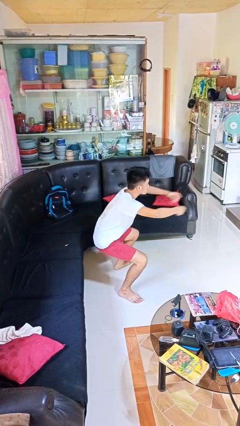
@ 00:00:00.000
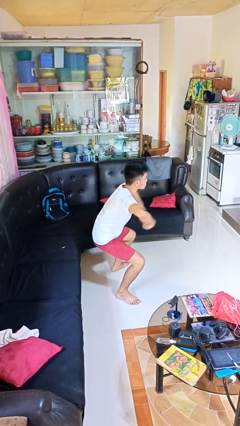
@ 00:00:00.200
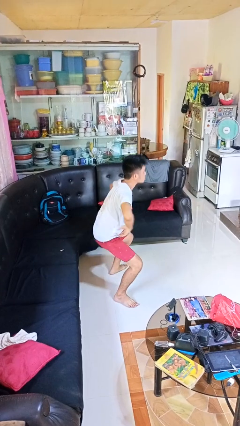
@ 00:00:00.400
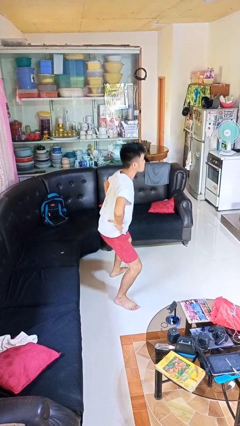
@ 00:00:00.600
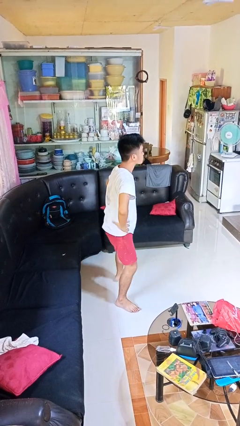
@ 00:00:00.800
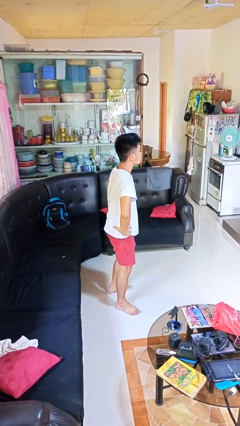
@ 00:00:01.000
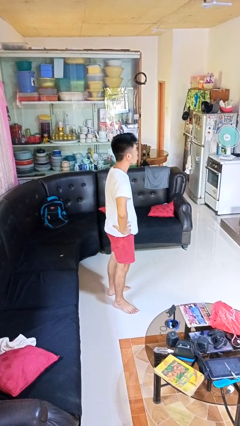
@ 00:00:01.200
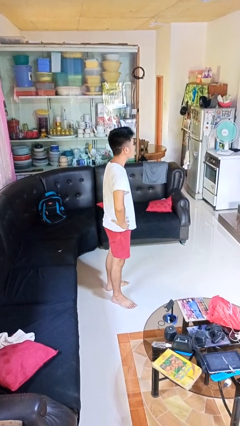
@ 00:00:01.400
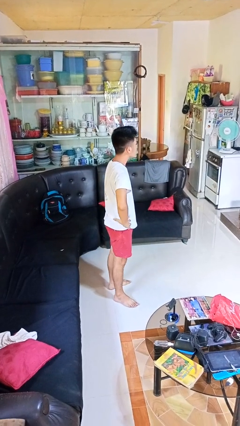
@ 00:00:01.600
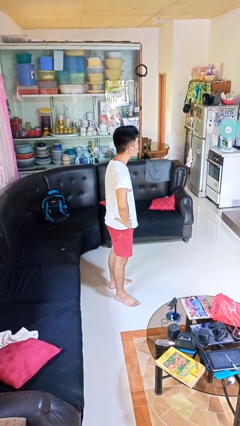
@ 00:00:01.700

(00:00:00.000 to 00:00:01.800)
person stands up

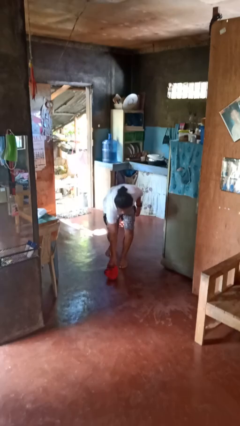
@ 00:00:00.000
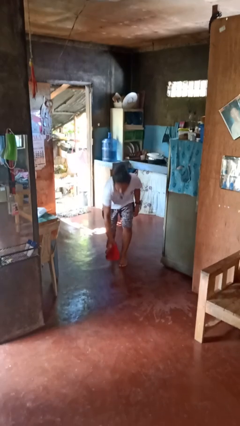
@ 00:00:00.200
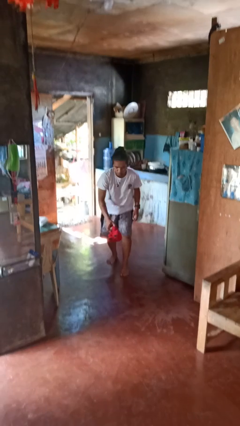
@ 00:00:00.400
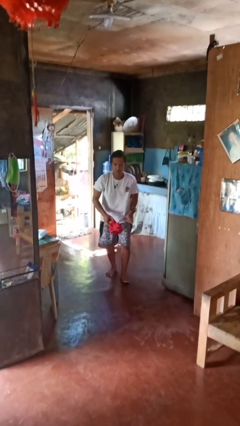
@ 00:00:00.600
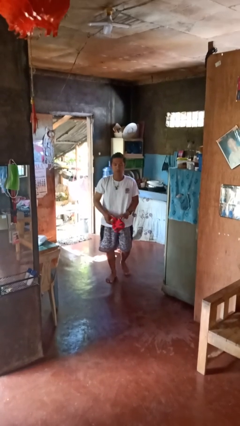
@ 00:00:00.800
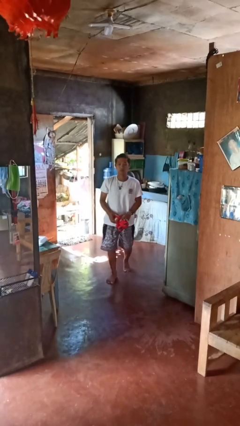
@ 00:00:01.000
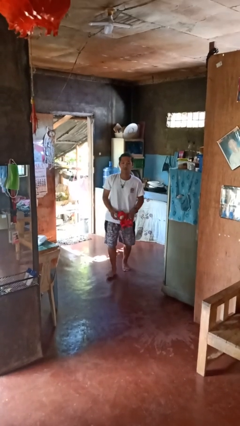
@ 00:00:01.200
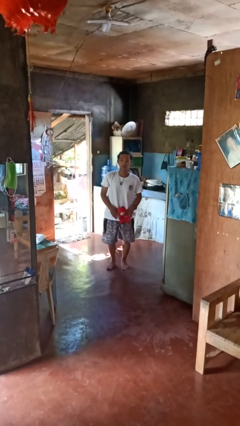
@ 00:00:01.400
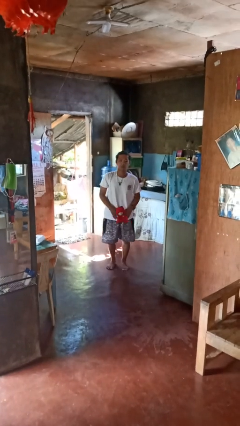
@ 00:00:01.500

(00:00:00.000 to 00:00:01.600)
person picks up object from floor

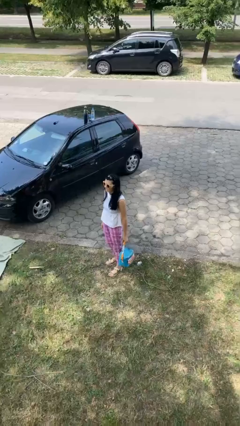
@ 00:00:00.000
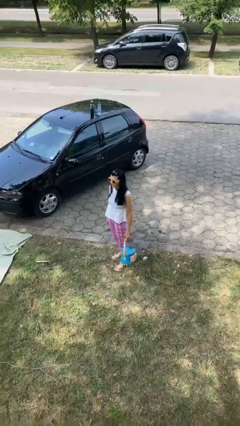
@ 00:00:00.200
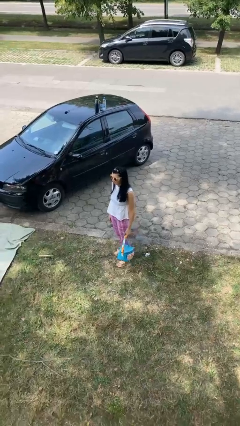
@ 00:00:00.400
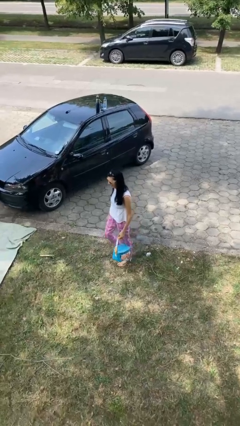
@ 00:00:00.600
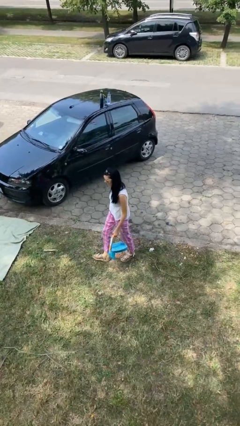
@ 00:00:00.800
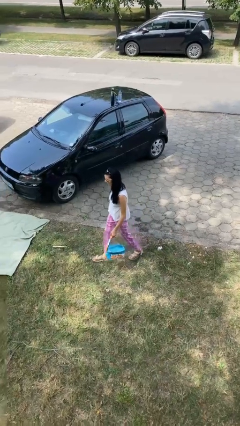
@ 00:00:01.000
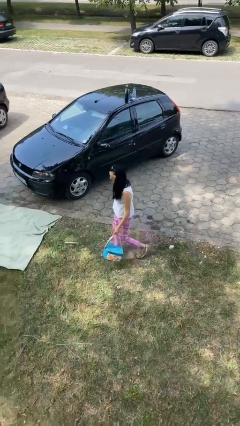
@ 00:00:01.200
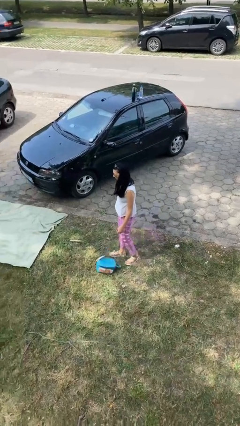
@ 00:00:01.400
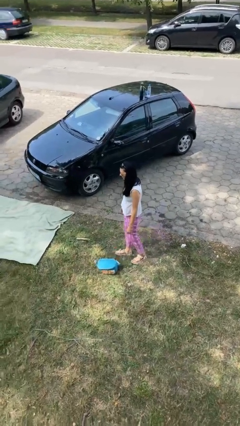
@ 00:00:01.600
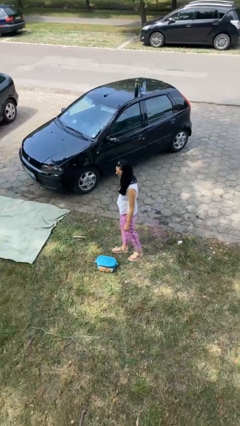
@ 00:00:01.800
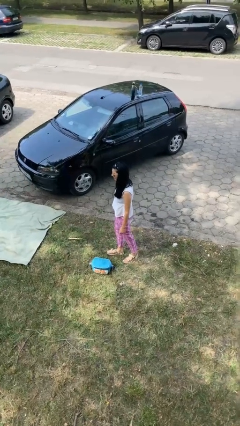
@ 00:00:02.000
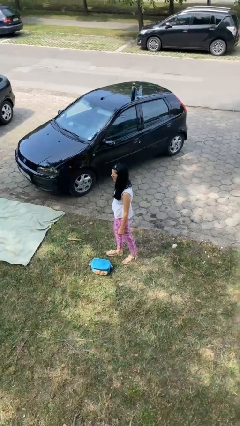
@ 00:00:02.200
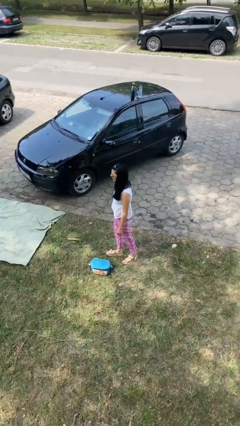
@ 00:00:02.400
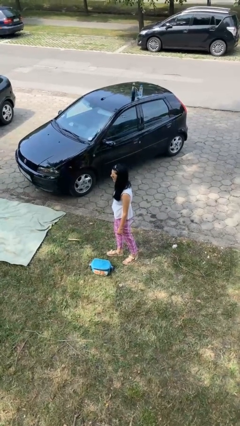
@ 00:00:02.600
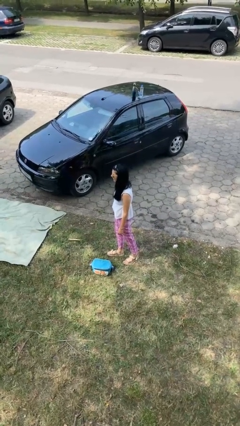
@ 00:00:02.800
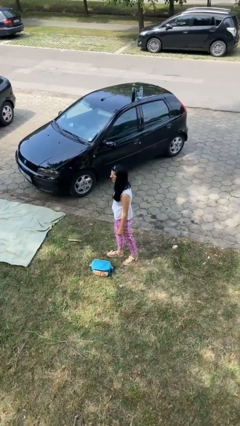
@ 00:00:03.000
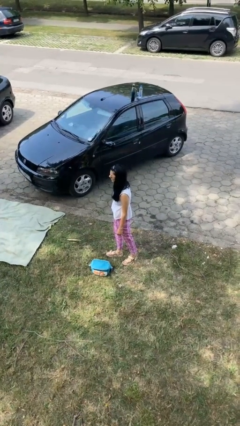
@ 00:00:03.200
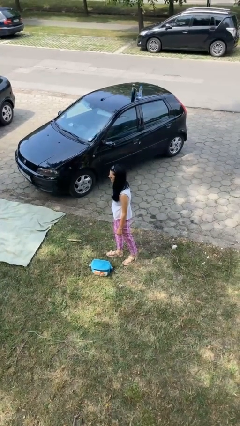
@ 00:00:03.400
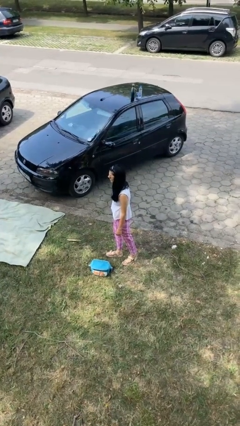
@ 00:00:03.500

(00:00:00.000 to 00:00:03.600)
person drops object

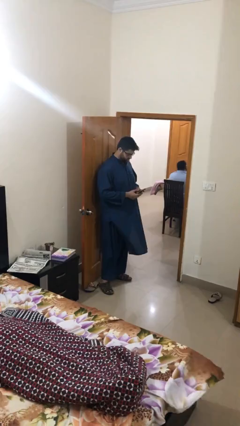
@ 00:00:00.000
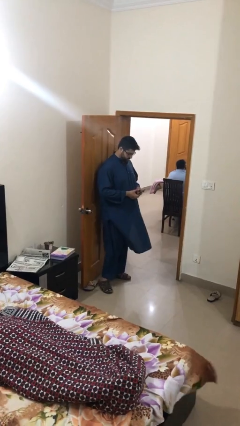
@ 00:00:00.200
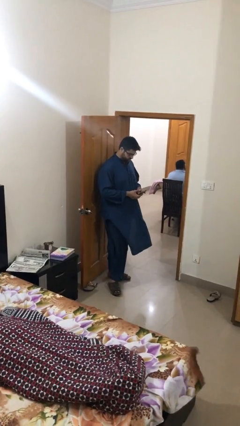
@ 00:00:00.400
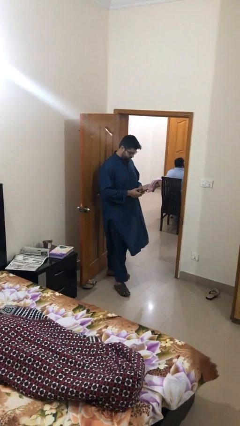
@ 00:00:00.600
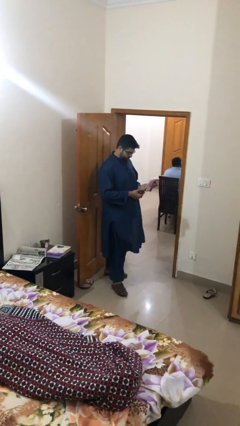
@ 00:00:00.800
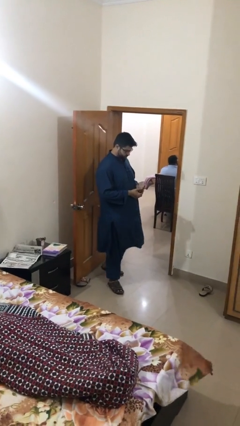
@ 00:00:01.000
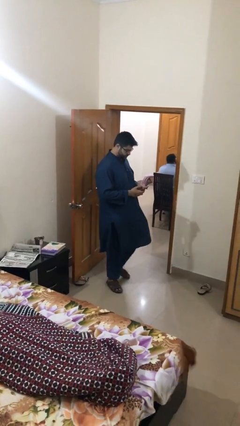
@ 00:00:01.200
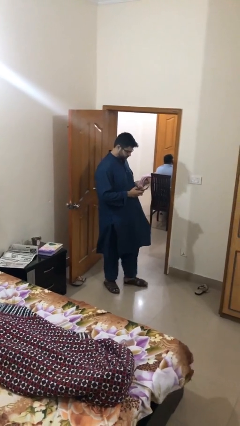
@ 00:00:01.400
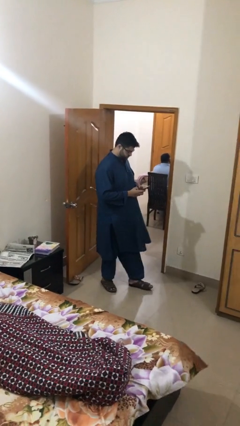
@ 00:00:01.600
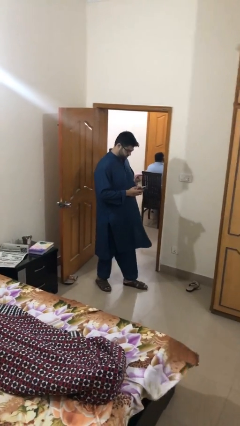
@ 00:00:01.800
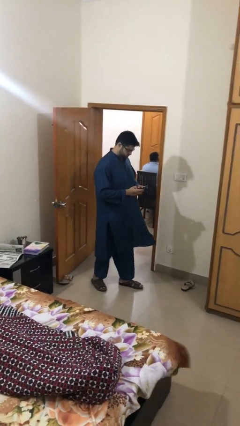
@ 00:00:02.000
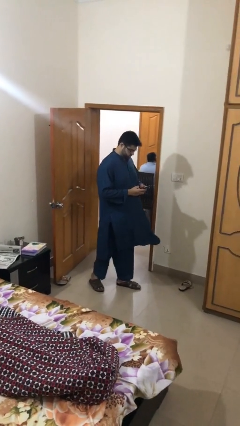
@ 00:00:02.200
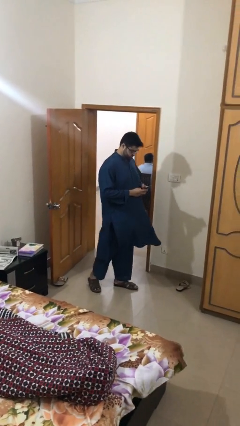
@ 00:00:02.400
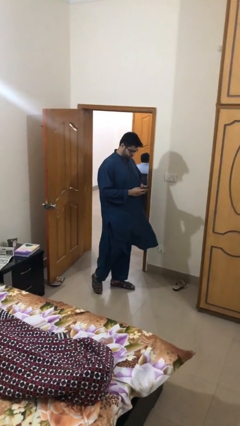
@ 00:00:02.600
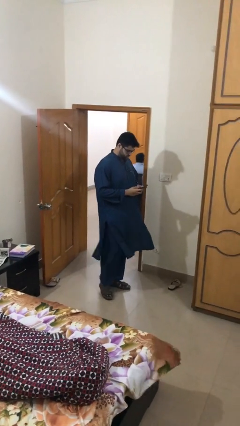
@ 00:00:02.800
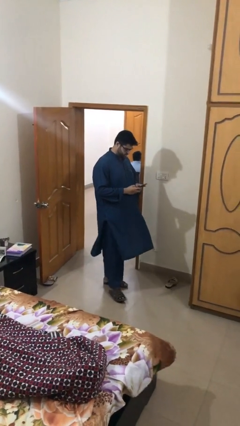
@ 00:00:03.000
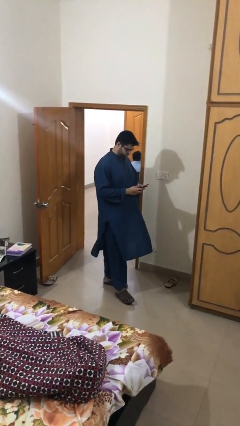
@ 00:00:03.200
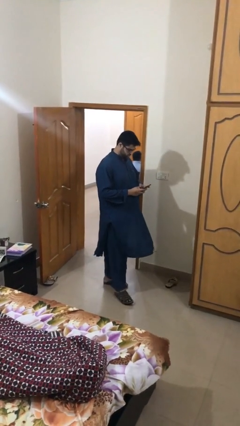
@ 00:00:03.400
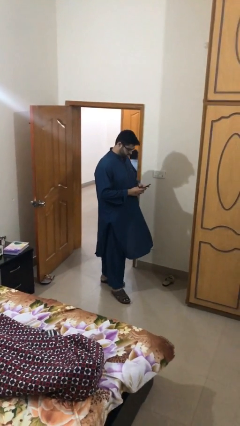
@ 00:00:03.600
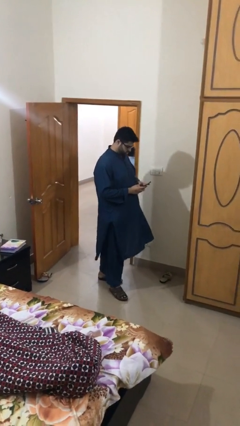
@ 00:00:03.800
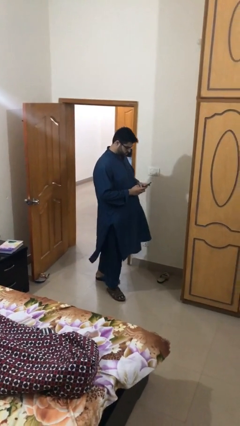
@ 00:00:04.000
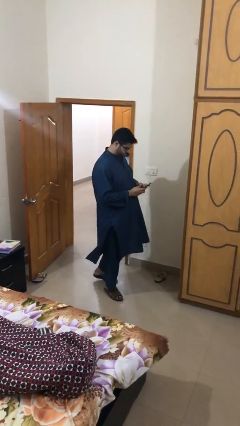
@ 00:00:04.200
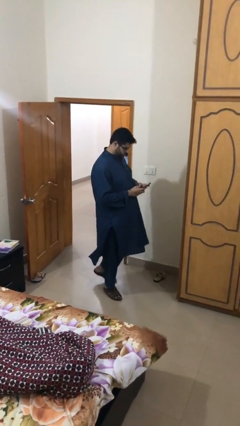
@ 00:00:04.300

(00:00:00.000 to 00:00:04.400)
person texts on phone

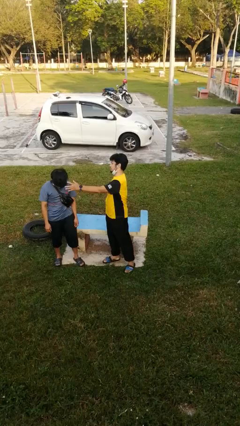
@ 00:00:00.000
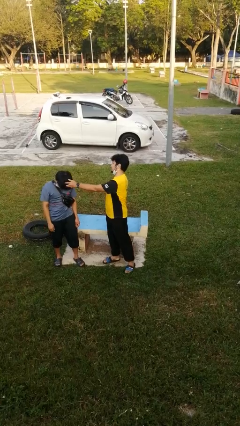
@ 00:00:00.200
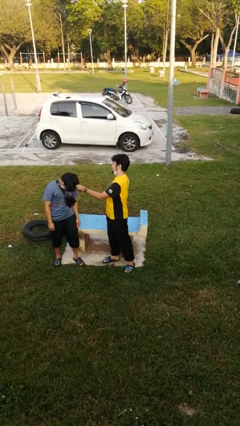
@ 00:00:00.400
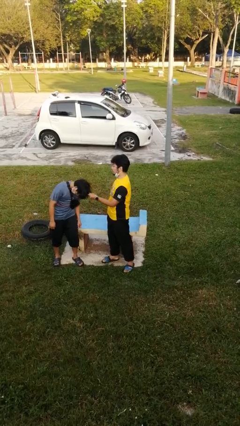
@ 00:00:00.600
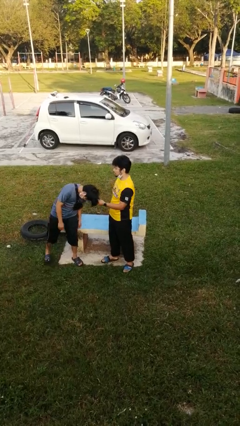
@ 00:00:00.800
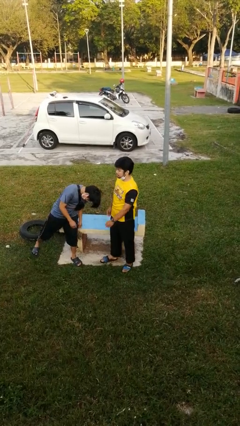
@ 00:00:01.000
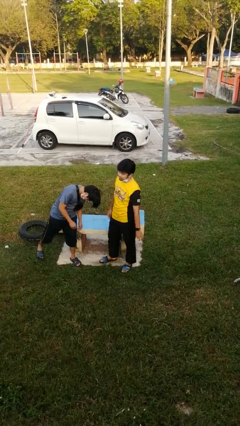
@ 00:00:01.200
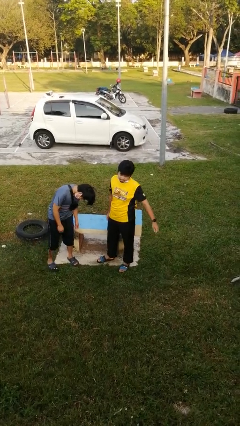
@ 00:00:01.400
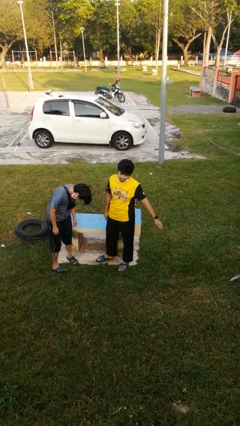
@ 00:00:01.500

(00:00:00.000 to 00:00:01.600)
person grabs person by hair

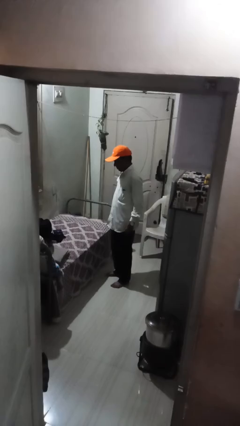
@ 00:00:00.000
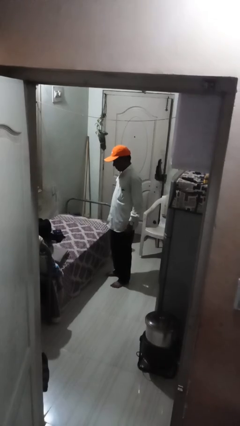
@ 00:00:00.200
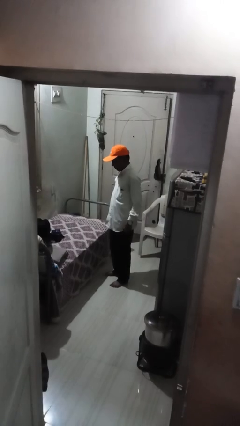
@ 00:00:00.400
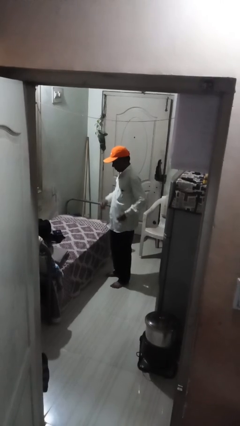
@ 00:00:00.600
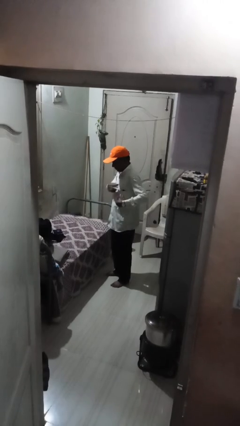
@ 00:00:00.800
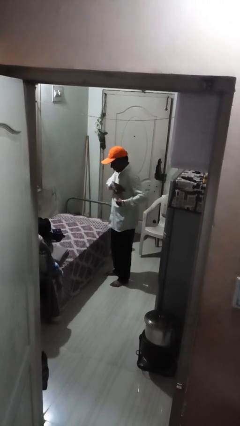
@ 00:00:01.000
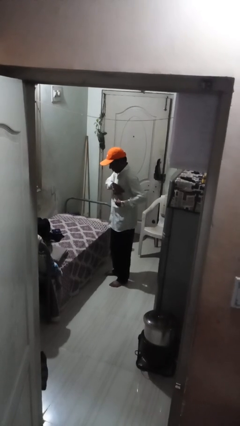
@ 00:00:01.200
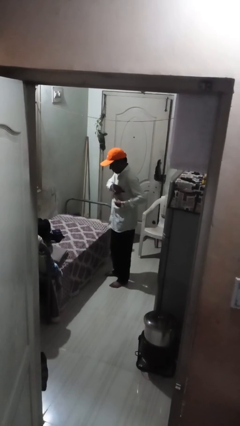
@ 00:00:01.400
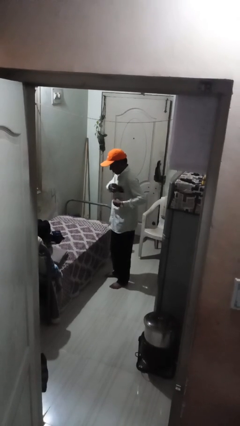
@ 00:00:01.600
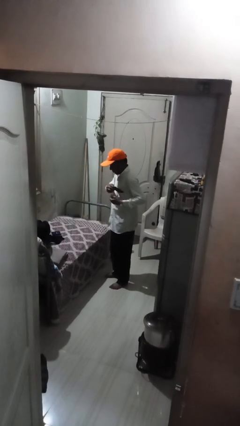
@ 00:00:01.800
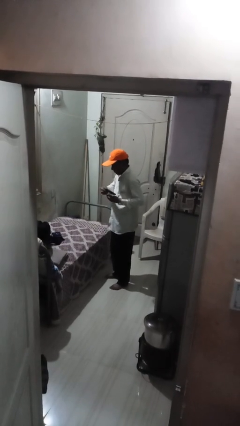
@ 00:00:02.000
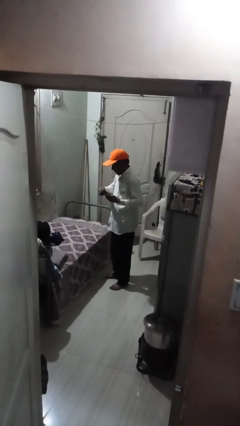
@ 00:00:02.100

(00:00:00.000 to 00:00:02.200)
person takes phone from pocket

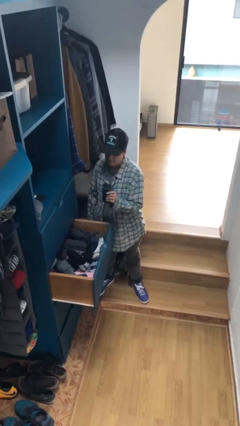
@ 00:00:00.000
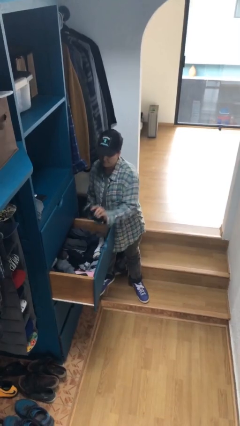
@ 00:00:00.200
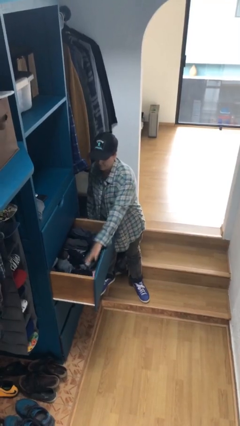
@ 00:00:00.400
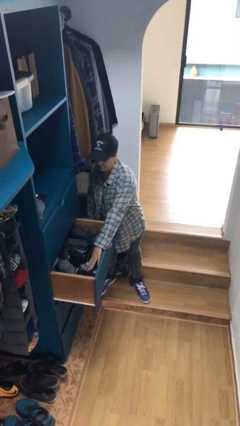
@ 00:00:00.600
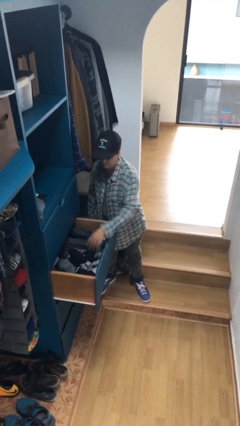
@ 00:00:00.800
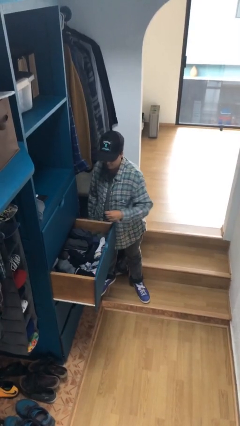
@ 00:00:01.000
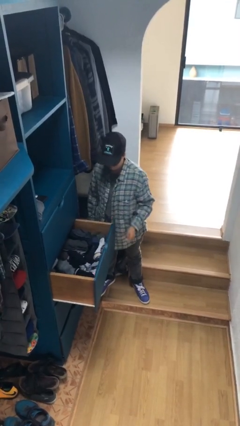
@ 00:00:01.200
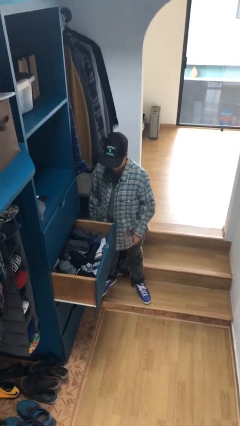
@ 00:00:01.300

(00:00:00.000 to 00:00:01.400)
person puts clothes into dresser
